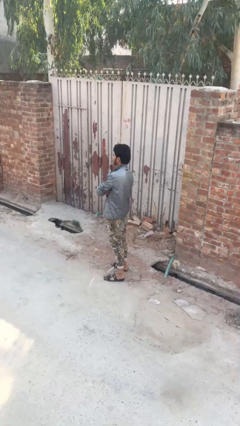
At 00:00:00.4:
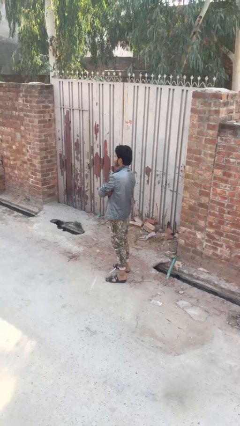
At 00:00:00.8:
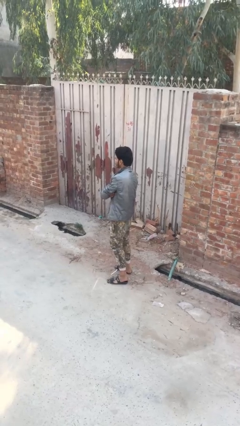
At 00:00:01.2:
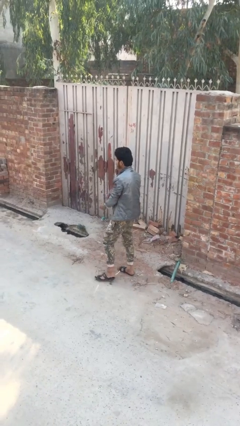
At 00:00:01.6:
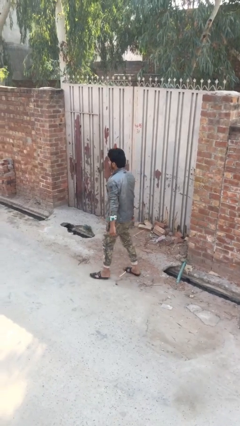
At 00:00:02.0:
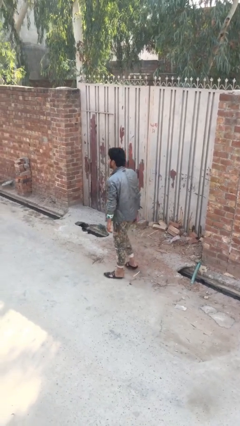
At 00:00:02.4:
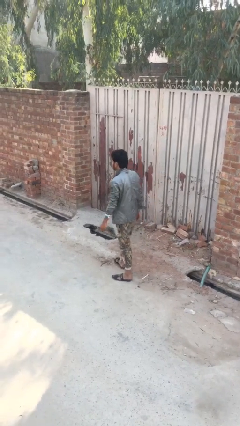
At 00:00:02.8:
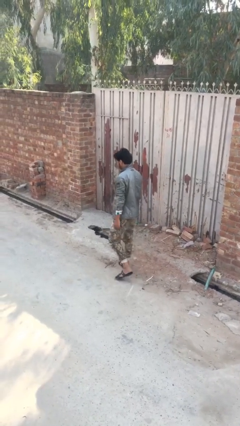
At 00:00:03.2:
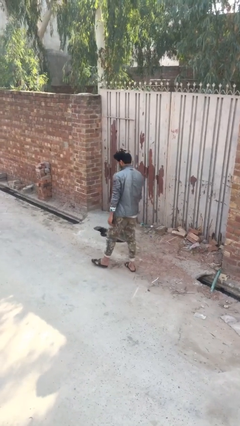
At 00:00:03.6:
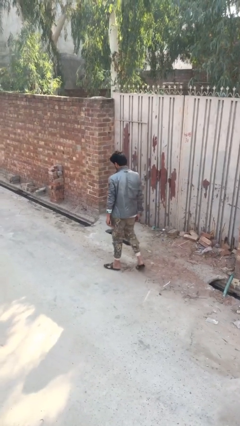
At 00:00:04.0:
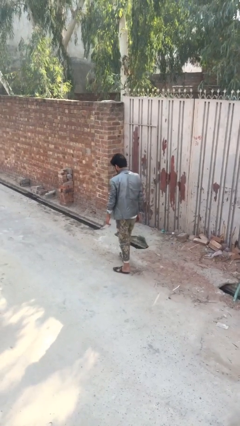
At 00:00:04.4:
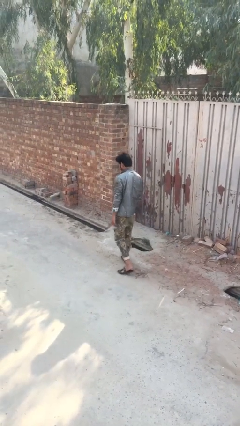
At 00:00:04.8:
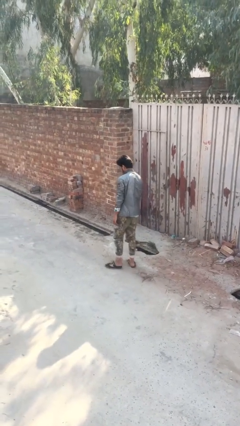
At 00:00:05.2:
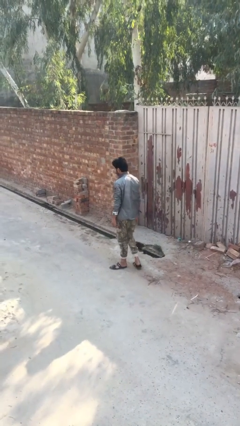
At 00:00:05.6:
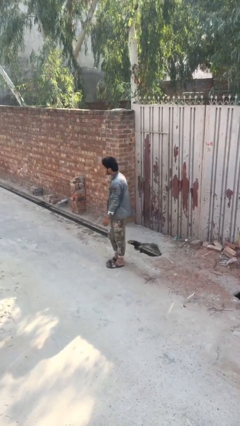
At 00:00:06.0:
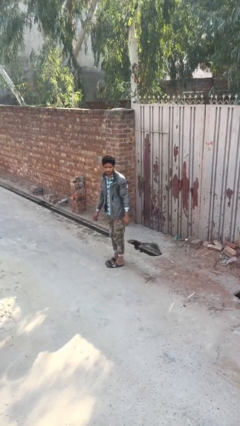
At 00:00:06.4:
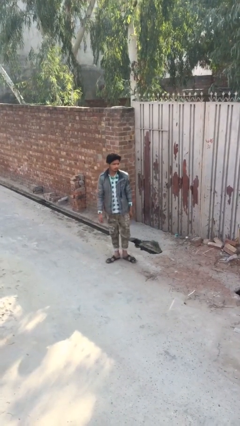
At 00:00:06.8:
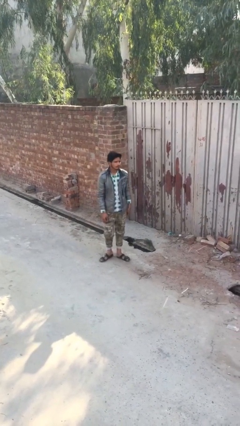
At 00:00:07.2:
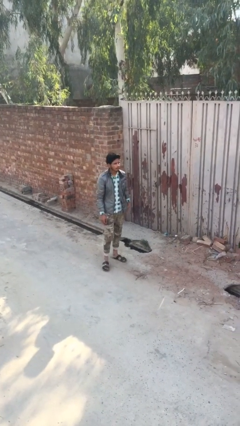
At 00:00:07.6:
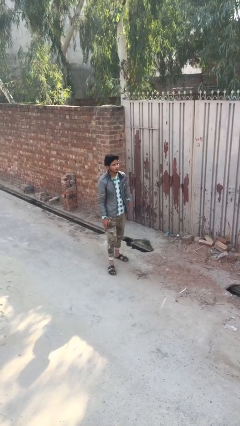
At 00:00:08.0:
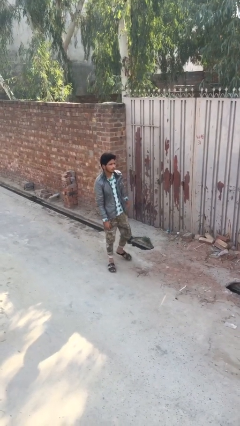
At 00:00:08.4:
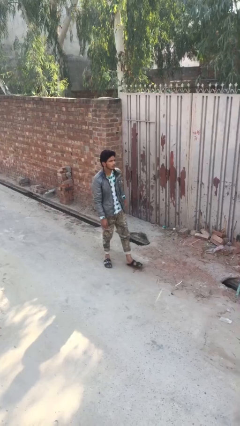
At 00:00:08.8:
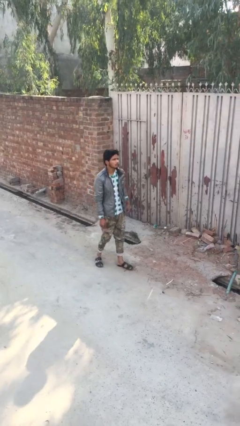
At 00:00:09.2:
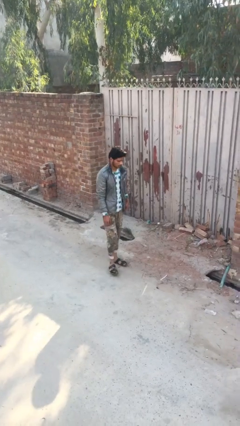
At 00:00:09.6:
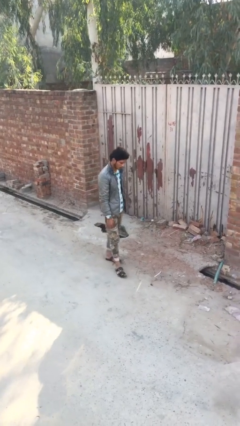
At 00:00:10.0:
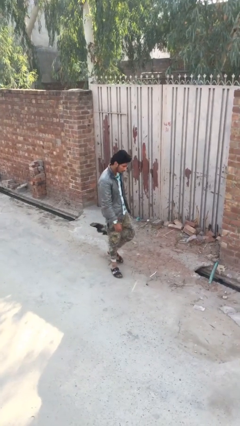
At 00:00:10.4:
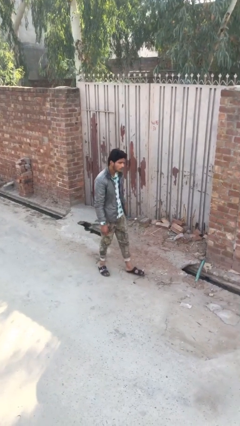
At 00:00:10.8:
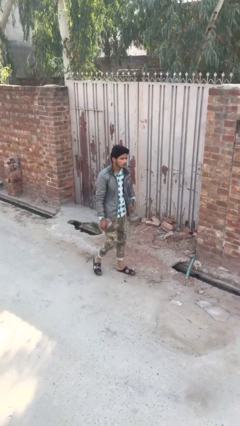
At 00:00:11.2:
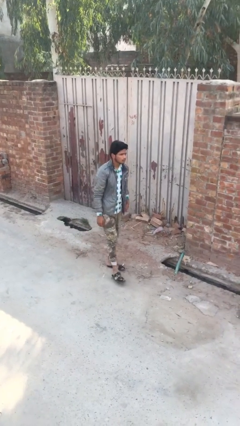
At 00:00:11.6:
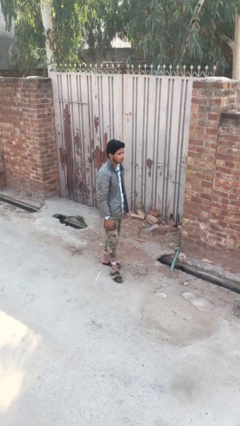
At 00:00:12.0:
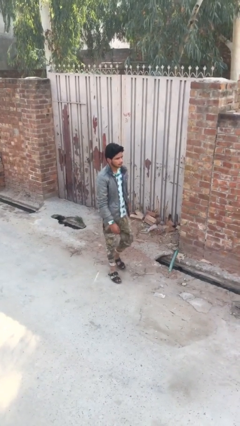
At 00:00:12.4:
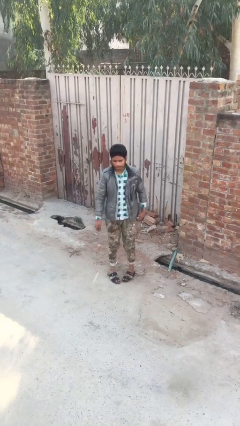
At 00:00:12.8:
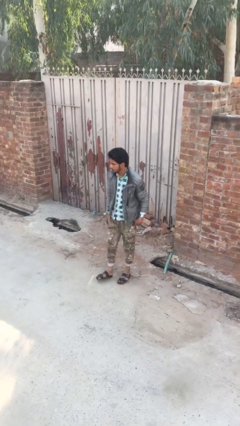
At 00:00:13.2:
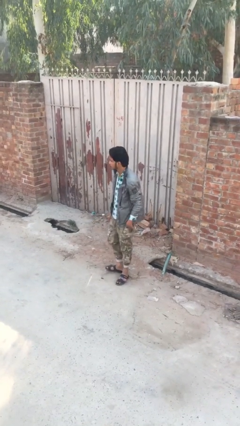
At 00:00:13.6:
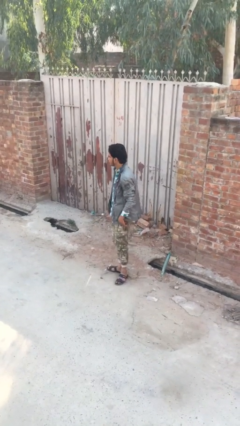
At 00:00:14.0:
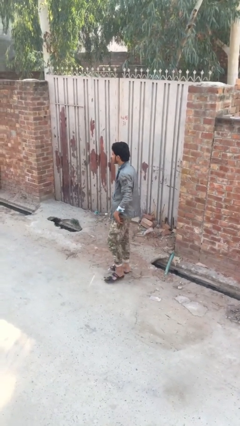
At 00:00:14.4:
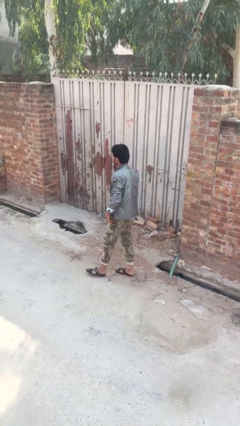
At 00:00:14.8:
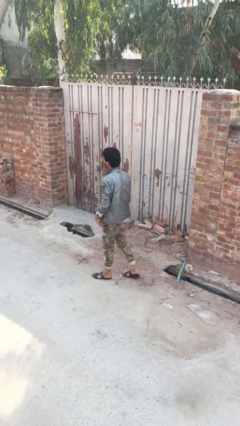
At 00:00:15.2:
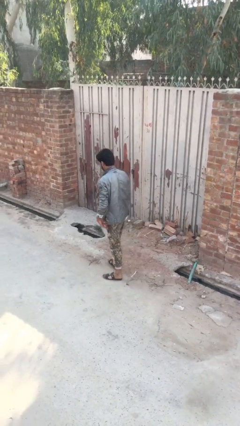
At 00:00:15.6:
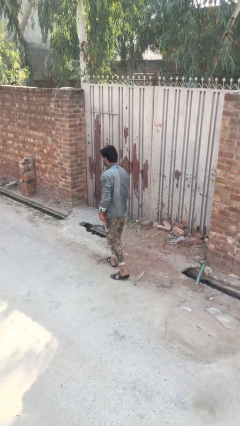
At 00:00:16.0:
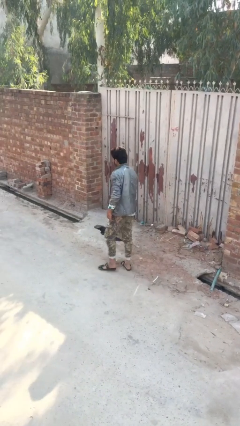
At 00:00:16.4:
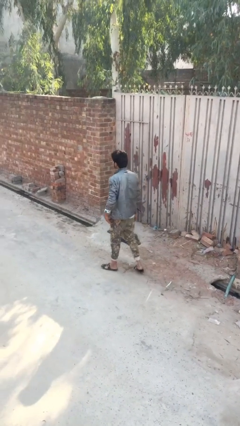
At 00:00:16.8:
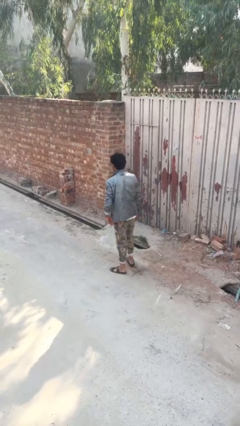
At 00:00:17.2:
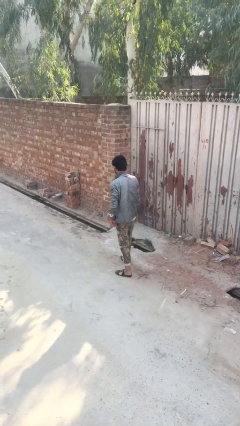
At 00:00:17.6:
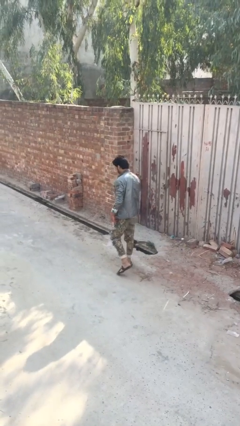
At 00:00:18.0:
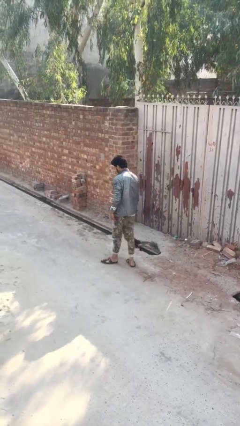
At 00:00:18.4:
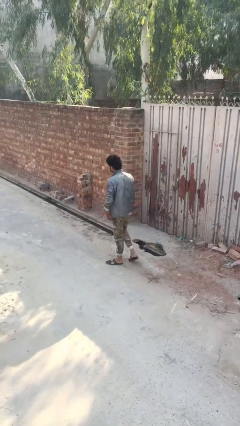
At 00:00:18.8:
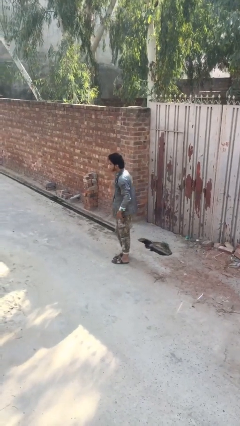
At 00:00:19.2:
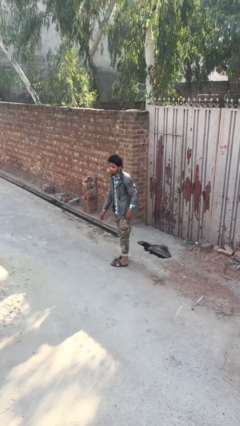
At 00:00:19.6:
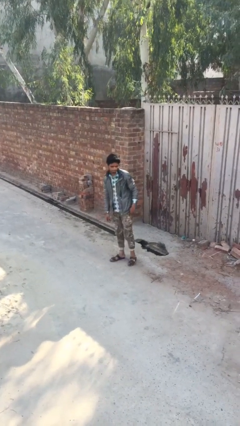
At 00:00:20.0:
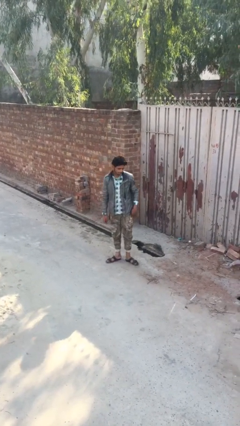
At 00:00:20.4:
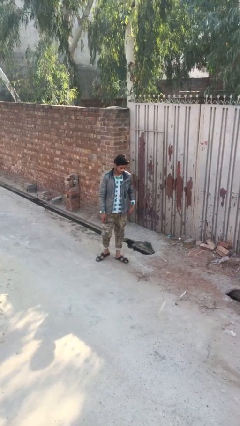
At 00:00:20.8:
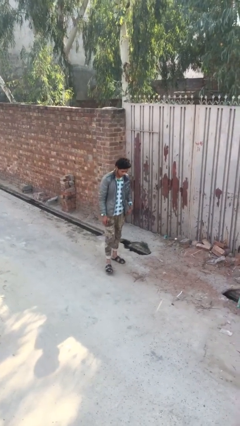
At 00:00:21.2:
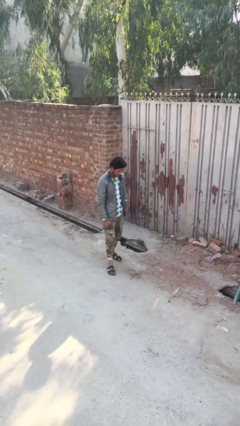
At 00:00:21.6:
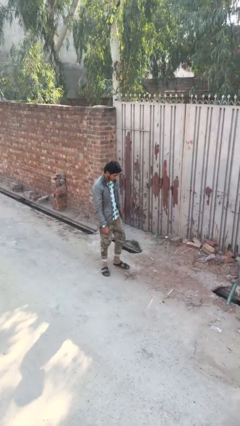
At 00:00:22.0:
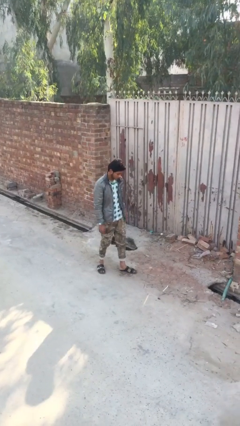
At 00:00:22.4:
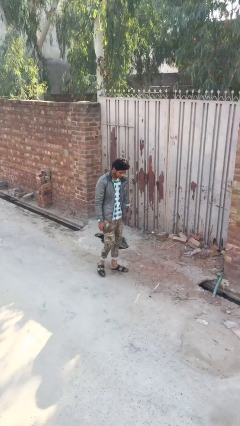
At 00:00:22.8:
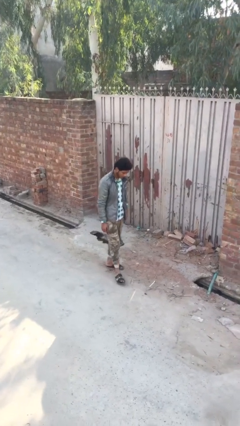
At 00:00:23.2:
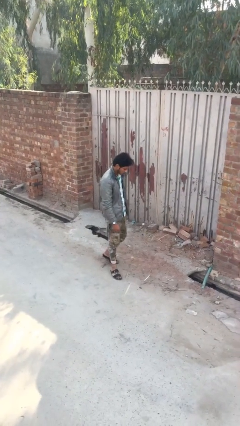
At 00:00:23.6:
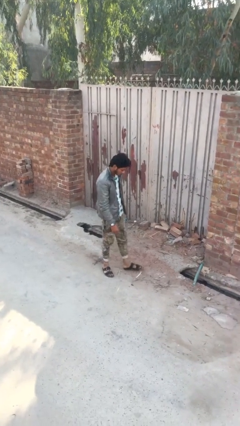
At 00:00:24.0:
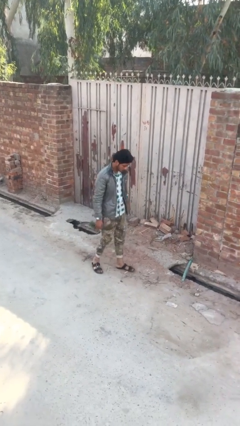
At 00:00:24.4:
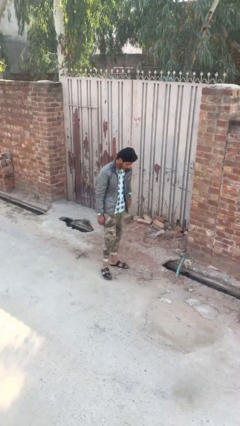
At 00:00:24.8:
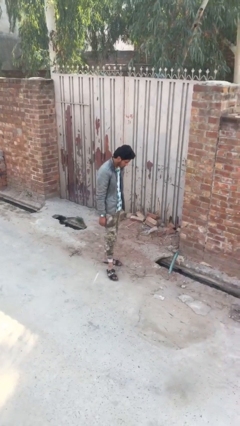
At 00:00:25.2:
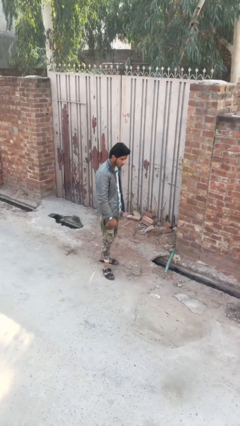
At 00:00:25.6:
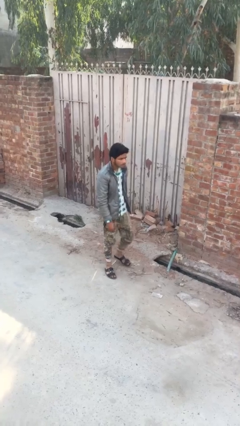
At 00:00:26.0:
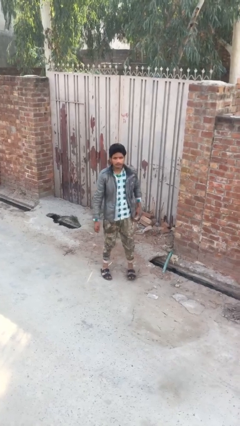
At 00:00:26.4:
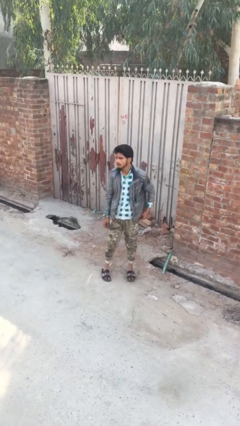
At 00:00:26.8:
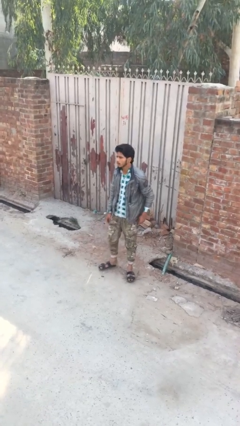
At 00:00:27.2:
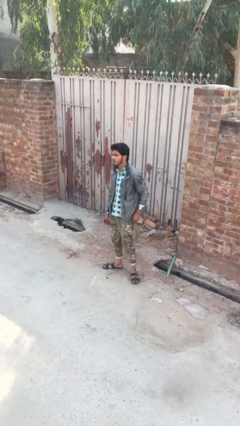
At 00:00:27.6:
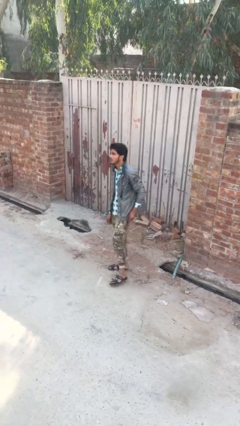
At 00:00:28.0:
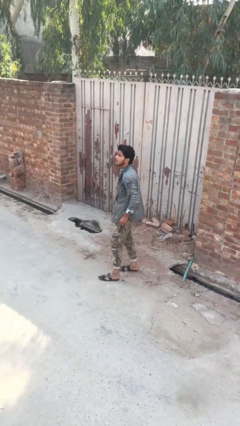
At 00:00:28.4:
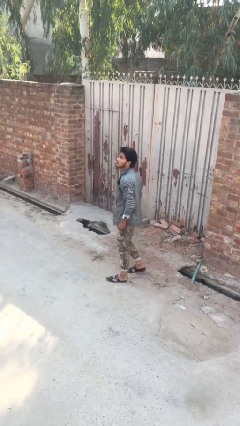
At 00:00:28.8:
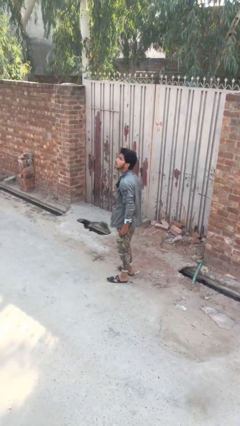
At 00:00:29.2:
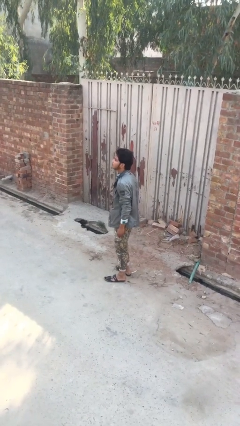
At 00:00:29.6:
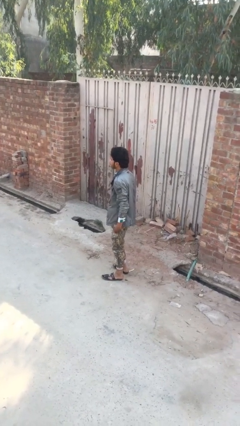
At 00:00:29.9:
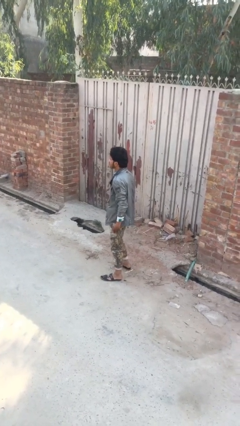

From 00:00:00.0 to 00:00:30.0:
person walks

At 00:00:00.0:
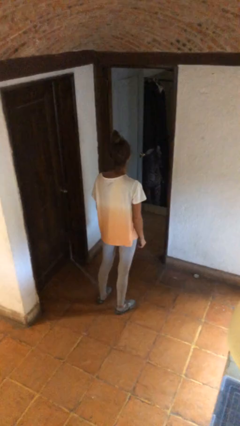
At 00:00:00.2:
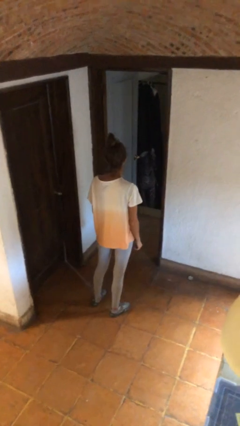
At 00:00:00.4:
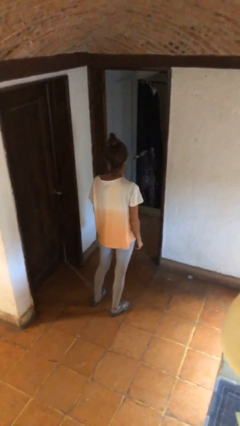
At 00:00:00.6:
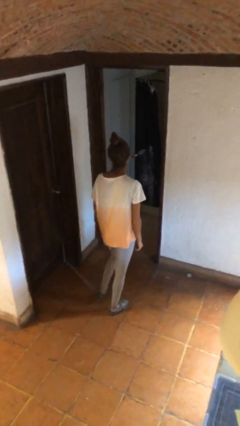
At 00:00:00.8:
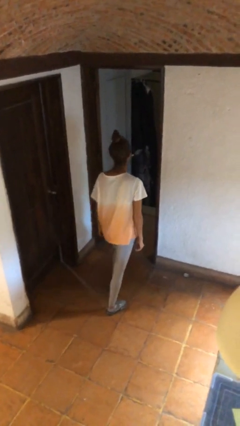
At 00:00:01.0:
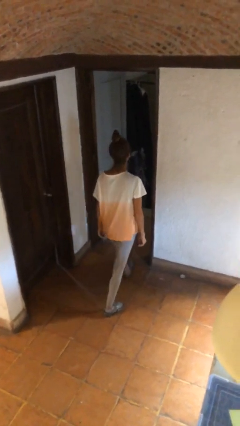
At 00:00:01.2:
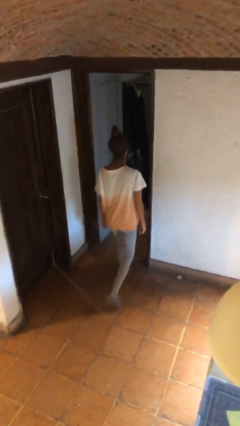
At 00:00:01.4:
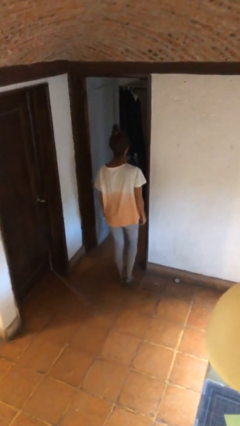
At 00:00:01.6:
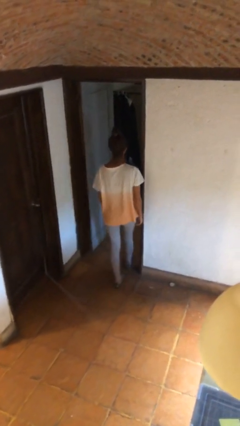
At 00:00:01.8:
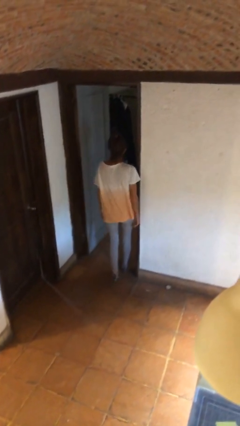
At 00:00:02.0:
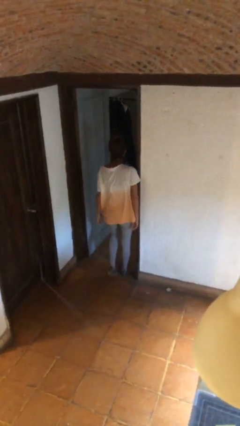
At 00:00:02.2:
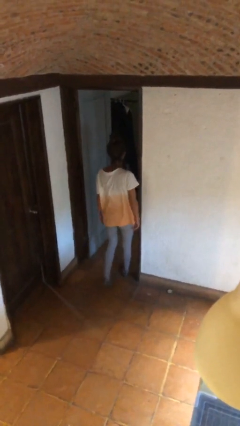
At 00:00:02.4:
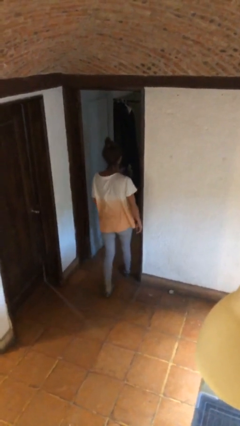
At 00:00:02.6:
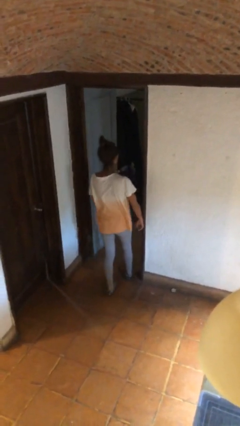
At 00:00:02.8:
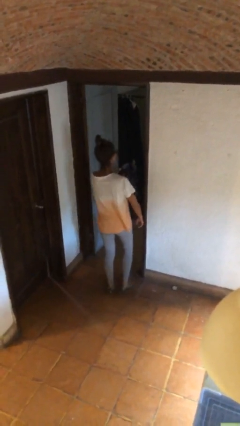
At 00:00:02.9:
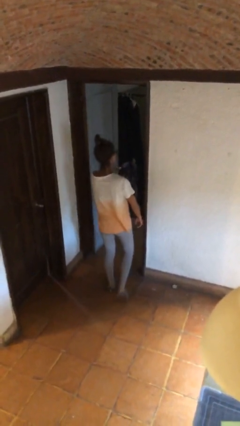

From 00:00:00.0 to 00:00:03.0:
person bumps into wall
